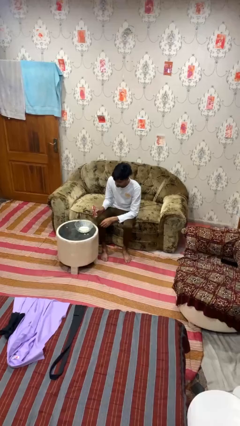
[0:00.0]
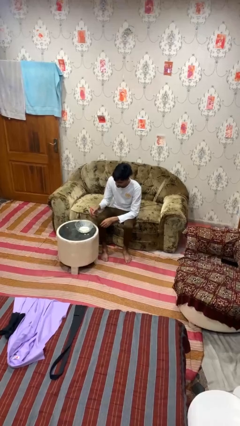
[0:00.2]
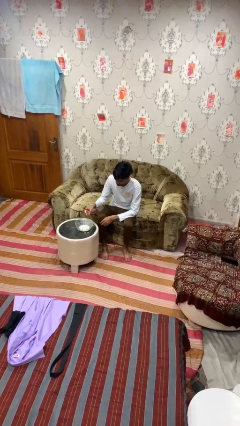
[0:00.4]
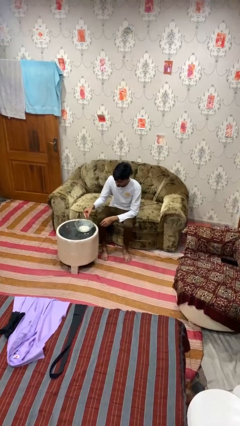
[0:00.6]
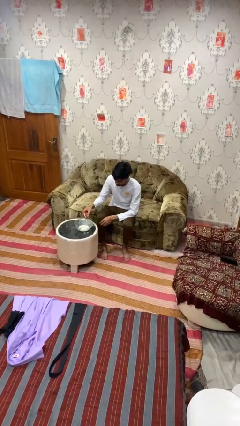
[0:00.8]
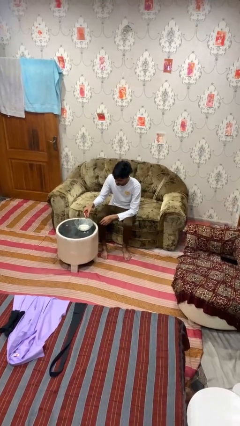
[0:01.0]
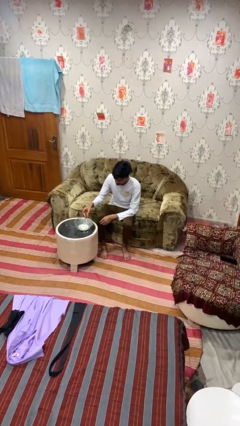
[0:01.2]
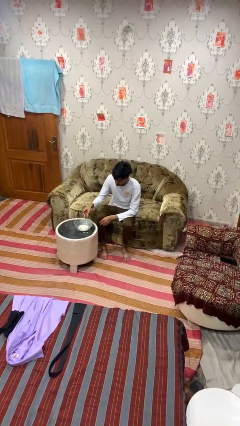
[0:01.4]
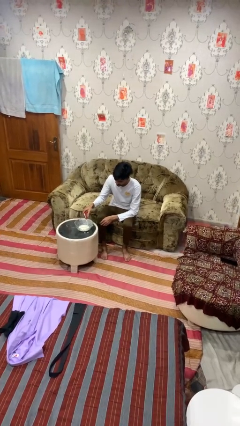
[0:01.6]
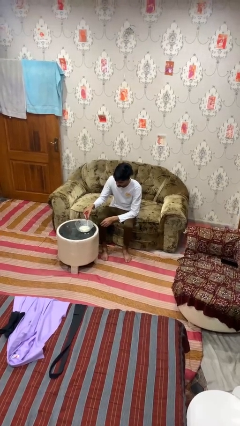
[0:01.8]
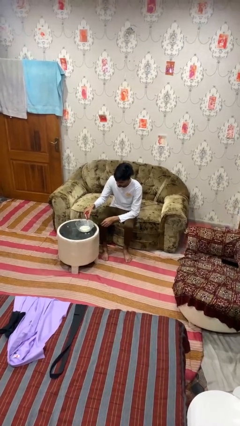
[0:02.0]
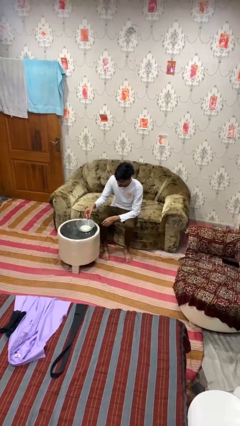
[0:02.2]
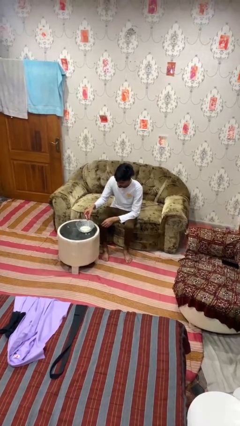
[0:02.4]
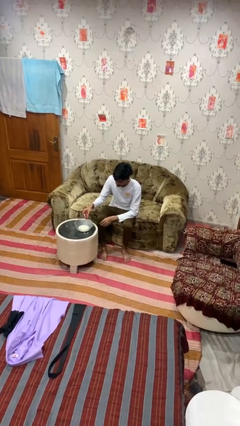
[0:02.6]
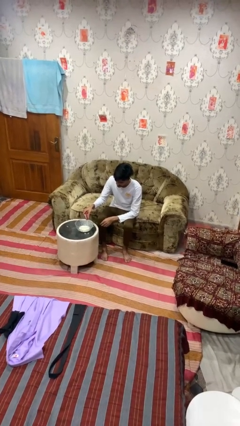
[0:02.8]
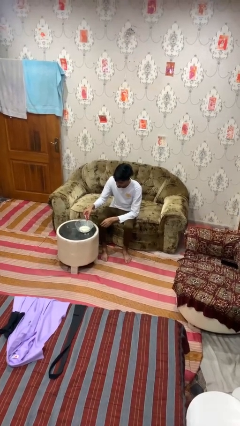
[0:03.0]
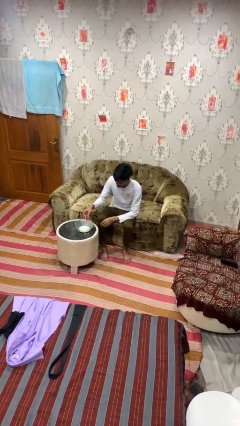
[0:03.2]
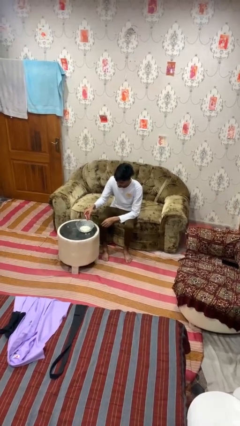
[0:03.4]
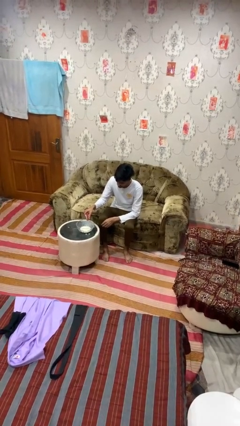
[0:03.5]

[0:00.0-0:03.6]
person pours into bowl

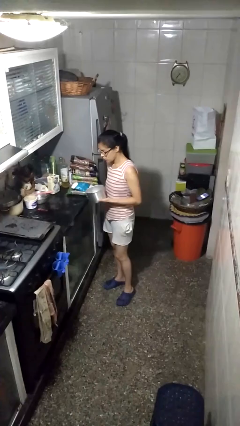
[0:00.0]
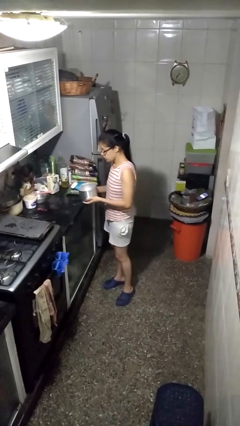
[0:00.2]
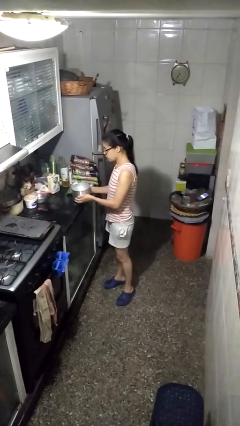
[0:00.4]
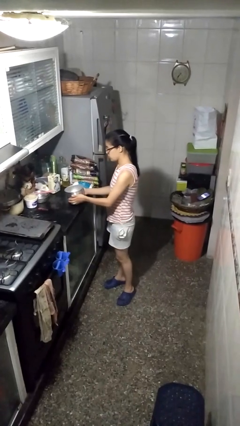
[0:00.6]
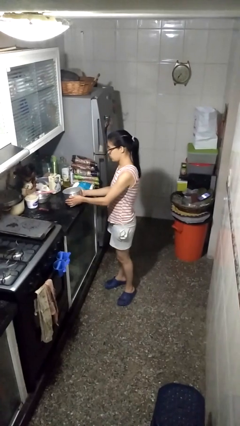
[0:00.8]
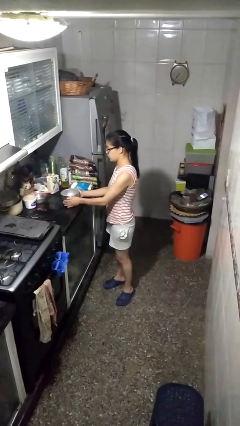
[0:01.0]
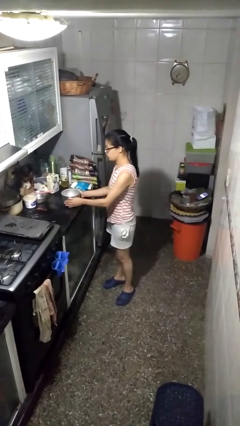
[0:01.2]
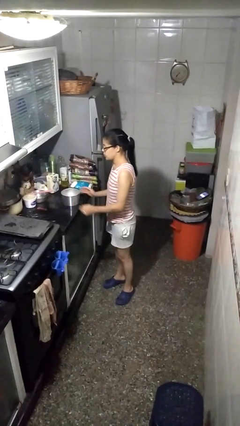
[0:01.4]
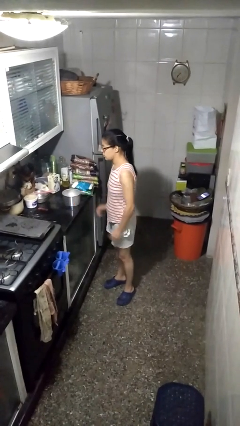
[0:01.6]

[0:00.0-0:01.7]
person puts down object on countertop

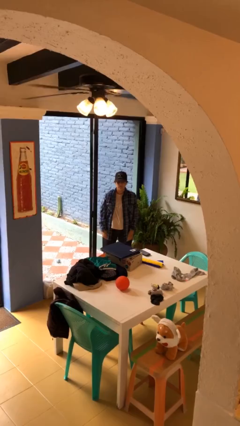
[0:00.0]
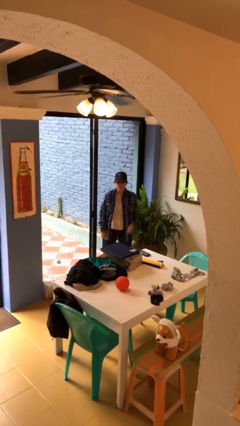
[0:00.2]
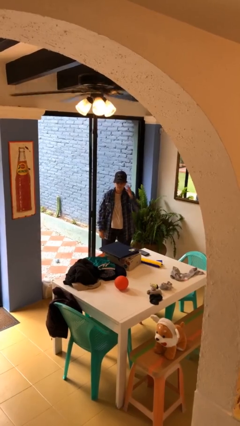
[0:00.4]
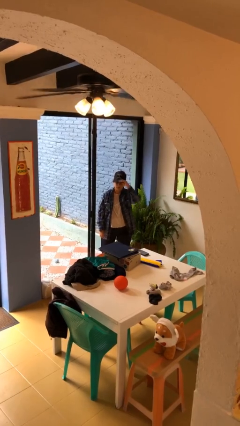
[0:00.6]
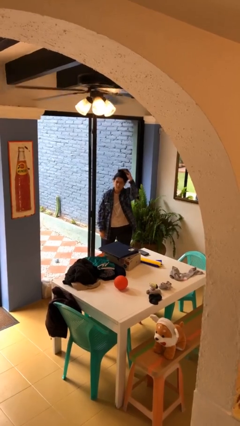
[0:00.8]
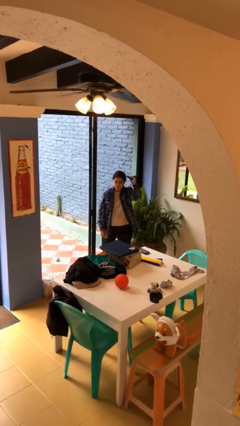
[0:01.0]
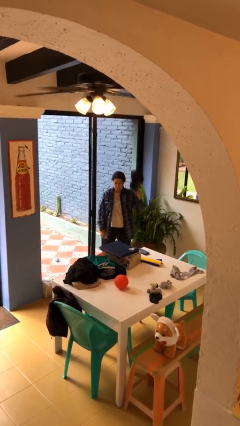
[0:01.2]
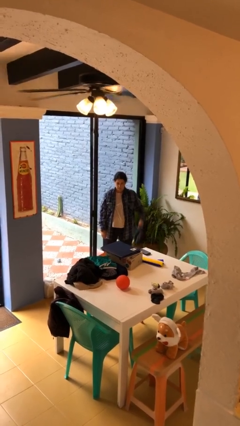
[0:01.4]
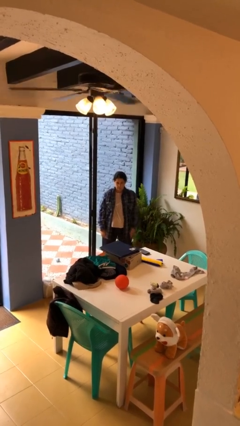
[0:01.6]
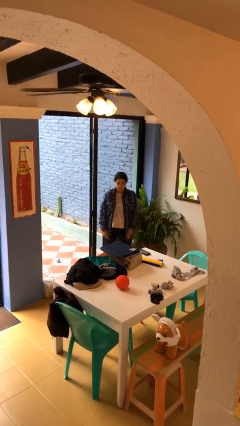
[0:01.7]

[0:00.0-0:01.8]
person takes off hat

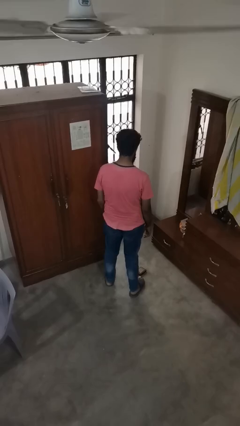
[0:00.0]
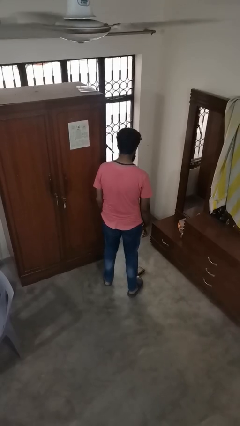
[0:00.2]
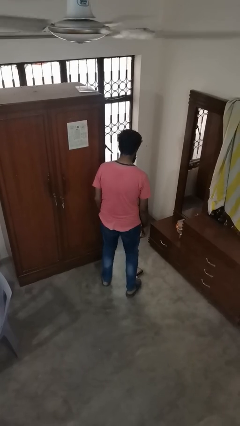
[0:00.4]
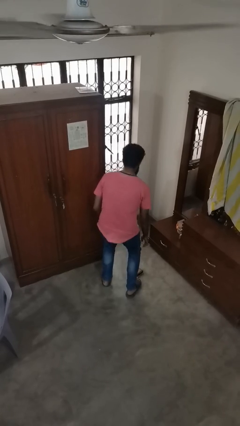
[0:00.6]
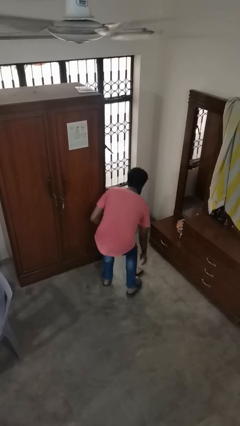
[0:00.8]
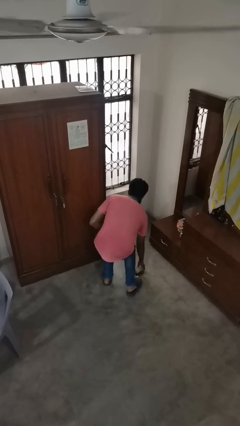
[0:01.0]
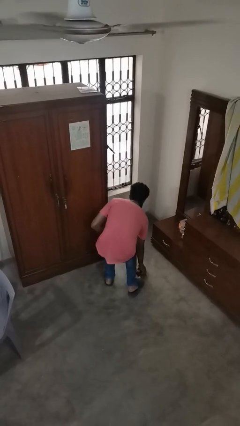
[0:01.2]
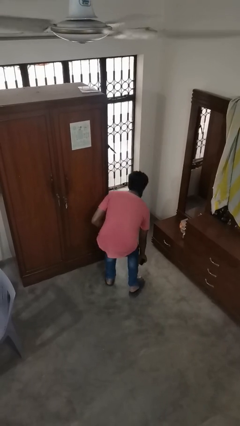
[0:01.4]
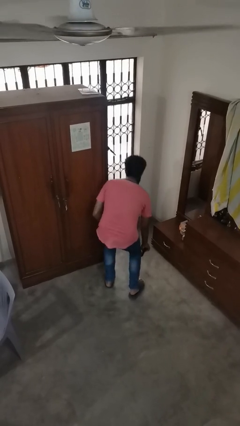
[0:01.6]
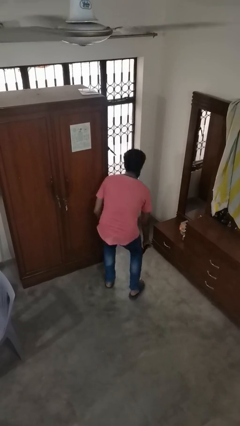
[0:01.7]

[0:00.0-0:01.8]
person picks up object from floor

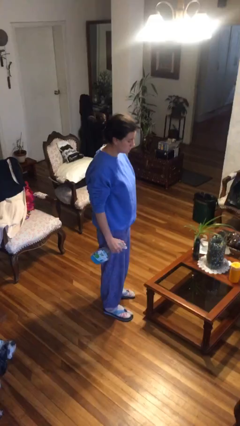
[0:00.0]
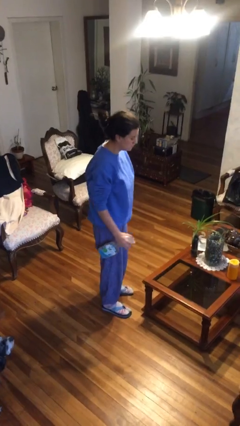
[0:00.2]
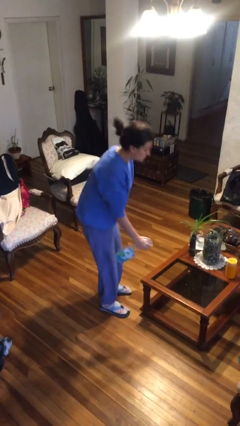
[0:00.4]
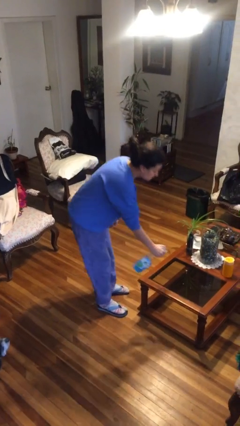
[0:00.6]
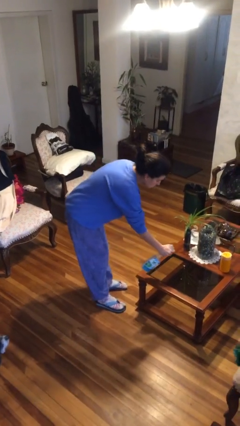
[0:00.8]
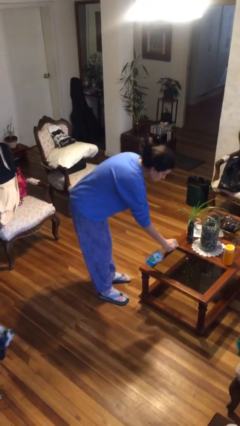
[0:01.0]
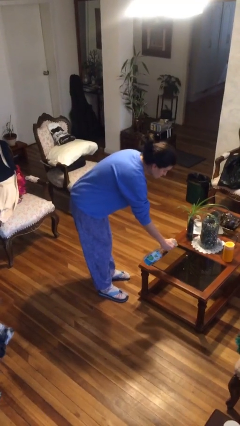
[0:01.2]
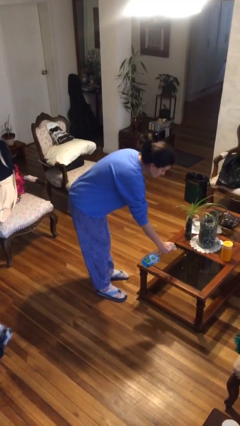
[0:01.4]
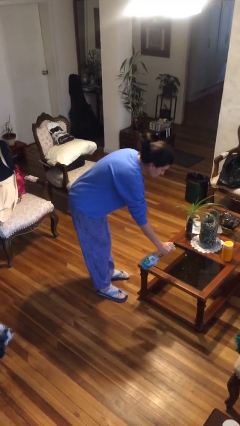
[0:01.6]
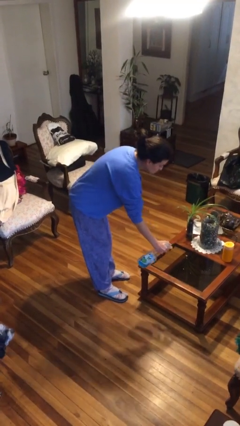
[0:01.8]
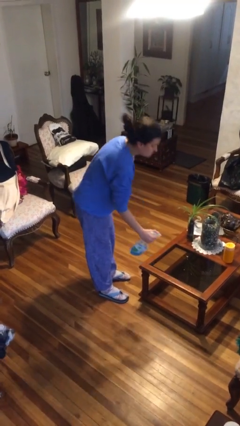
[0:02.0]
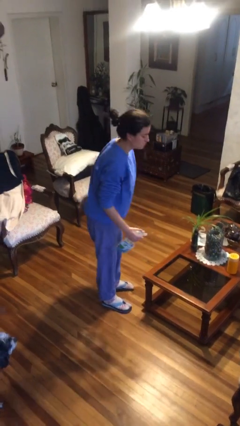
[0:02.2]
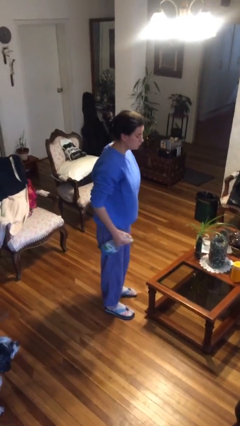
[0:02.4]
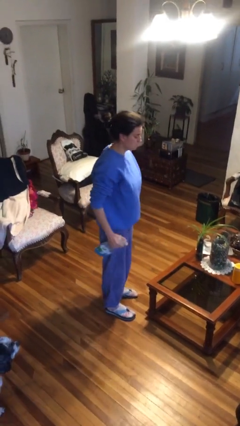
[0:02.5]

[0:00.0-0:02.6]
person sprays from bottle

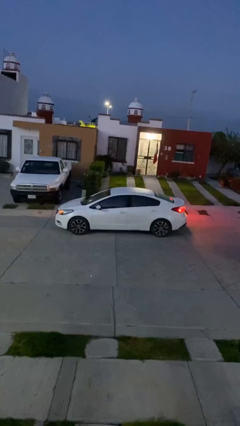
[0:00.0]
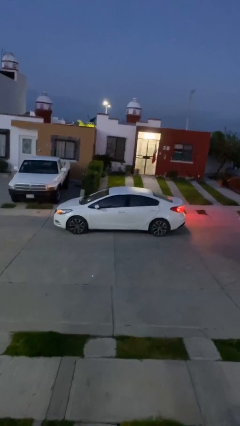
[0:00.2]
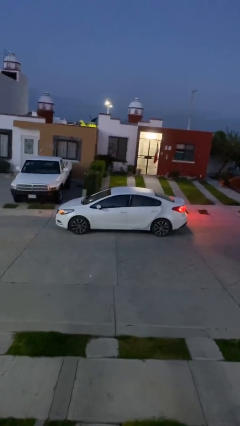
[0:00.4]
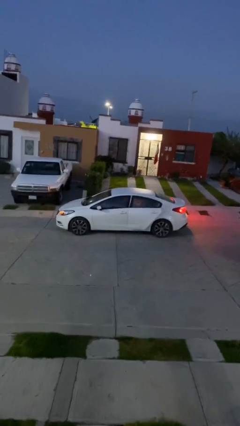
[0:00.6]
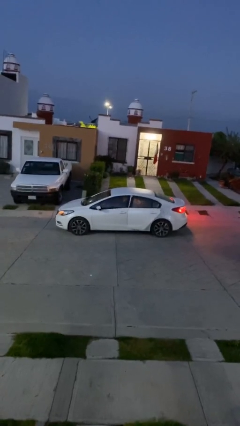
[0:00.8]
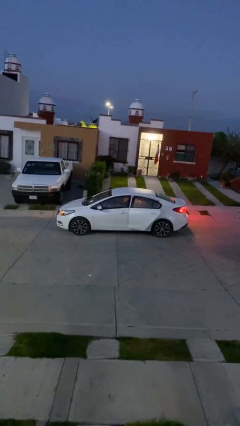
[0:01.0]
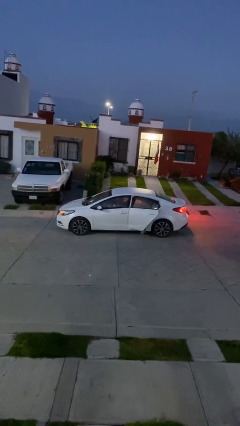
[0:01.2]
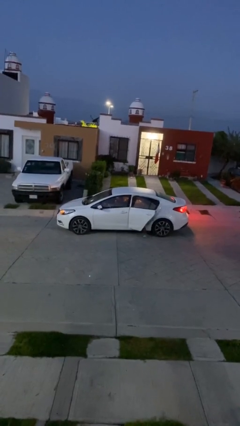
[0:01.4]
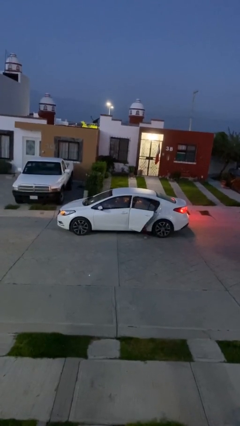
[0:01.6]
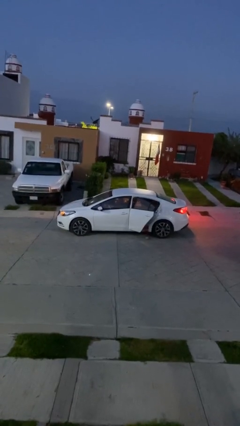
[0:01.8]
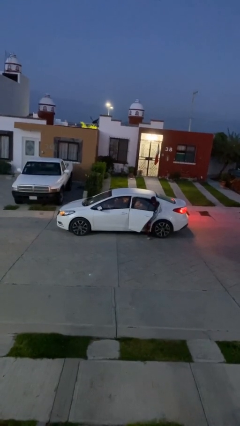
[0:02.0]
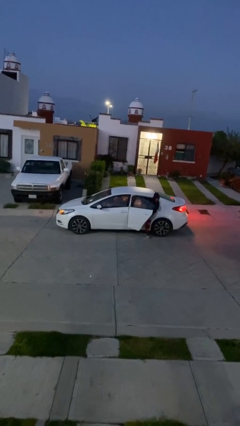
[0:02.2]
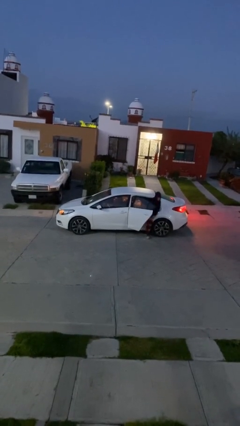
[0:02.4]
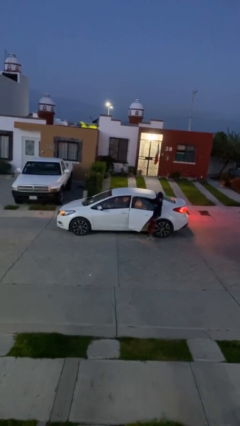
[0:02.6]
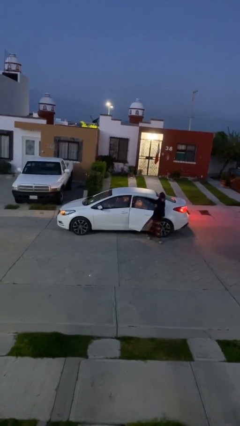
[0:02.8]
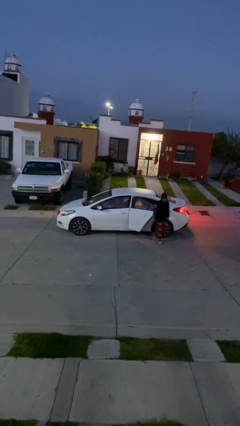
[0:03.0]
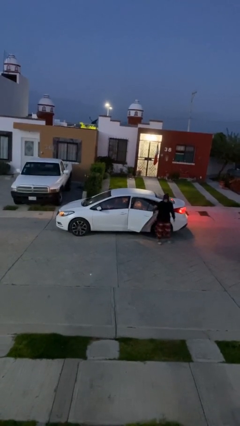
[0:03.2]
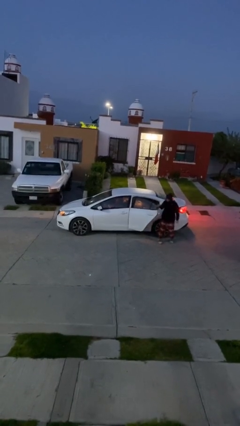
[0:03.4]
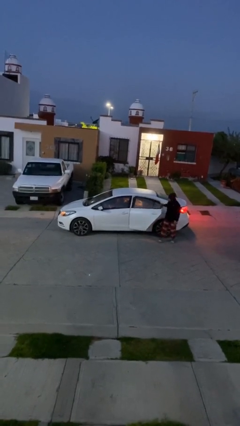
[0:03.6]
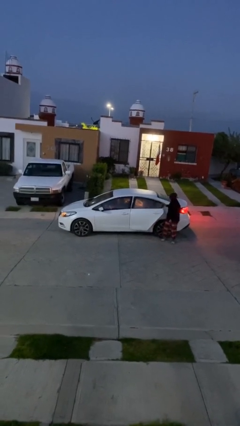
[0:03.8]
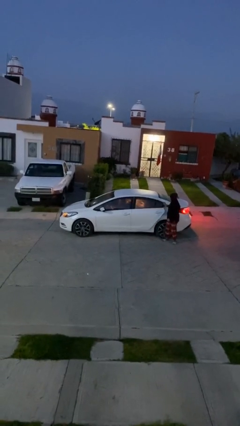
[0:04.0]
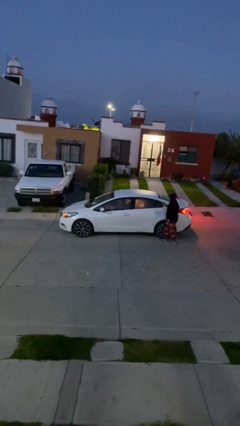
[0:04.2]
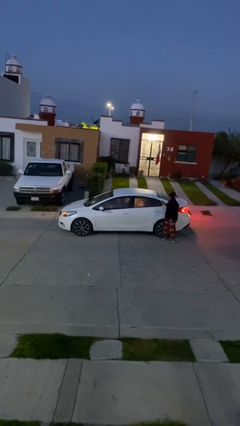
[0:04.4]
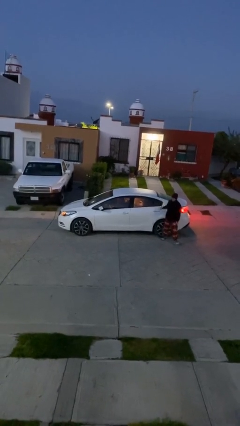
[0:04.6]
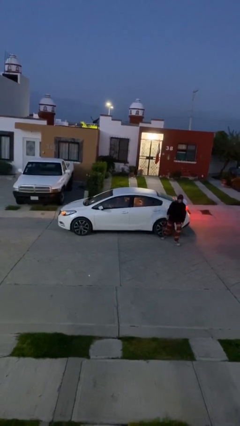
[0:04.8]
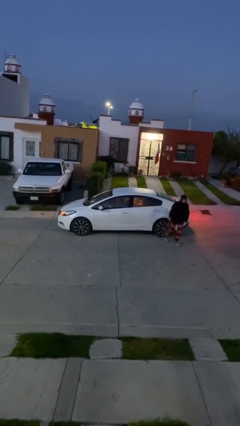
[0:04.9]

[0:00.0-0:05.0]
car drops off person

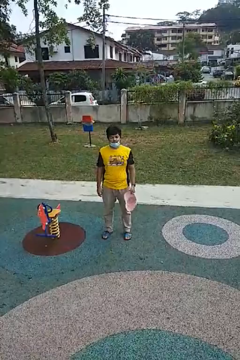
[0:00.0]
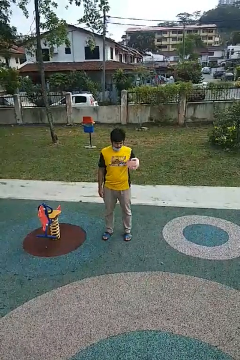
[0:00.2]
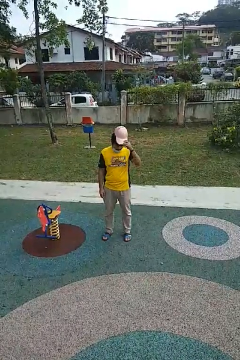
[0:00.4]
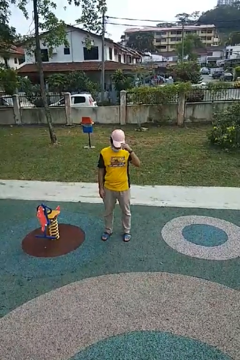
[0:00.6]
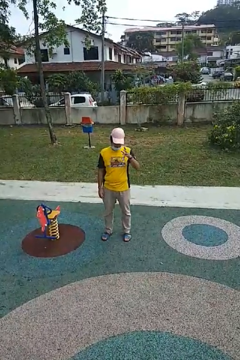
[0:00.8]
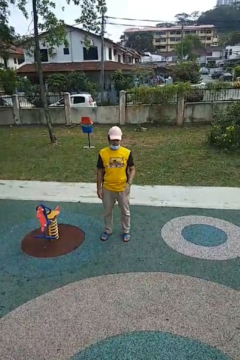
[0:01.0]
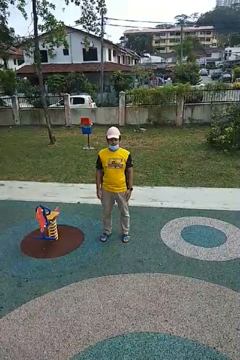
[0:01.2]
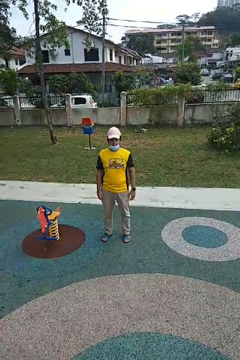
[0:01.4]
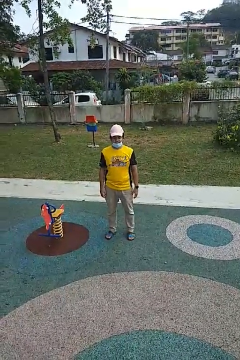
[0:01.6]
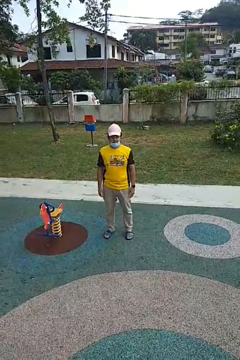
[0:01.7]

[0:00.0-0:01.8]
person puts on hat
